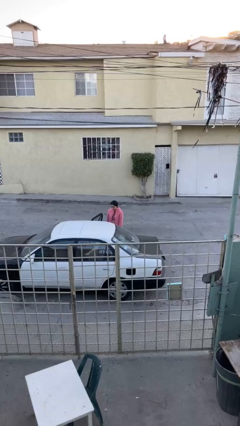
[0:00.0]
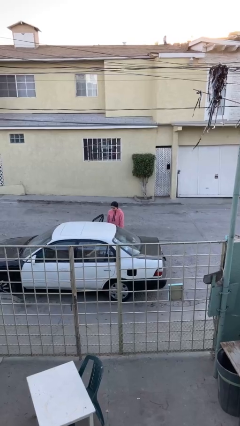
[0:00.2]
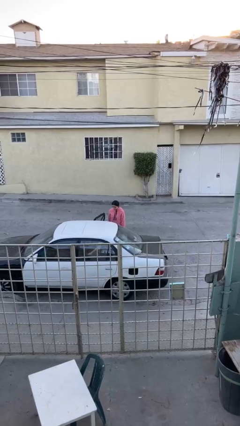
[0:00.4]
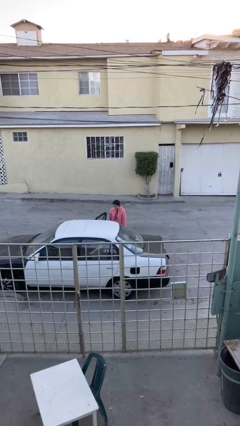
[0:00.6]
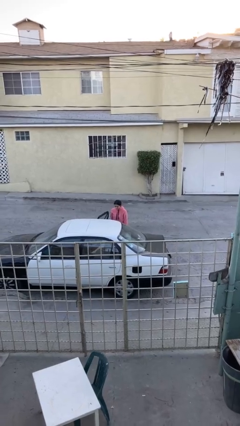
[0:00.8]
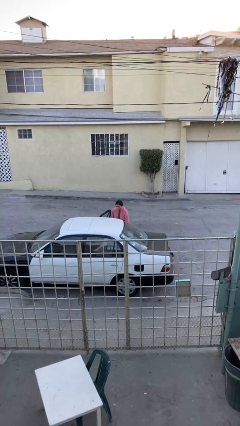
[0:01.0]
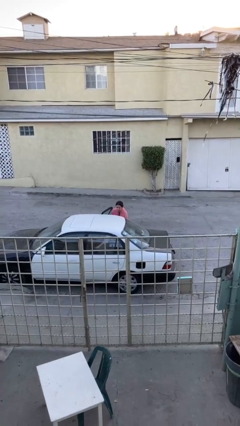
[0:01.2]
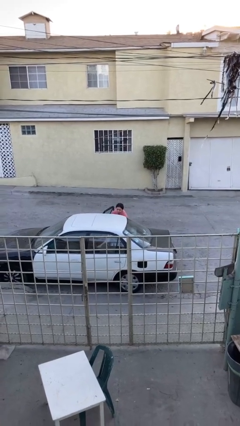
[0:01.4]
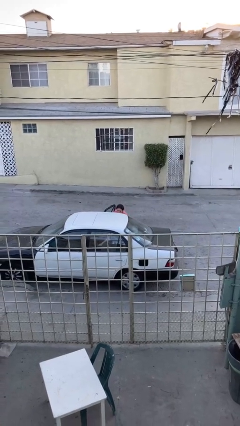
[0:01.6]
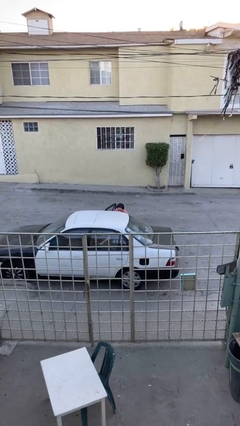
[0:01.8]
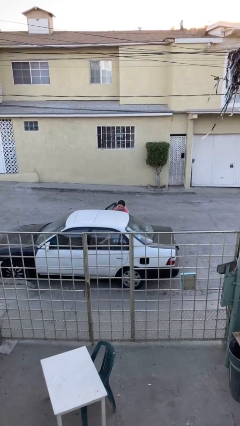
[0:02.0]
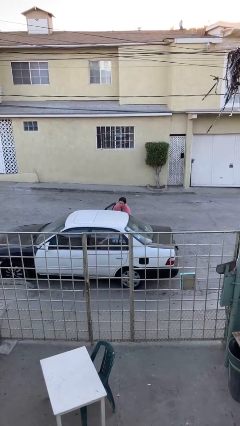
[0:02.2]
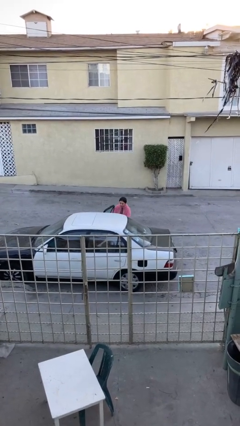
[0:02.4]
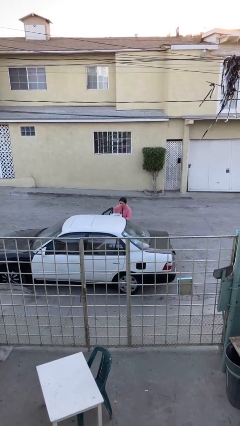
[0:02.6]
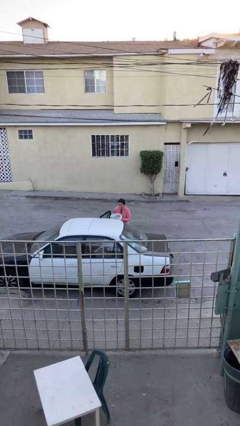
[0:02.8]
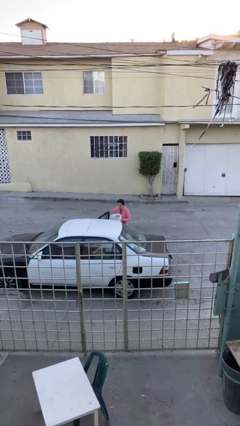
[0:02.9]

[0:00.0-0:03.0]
person unloads car

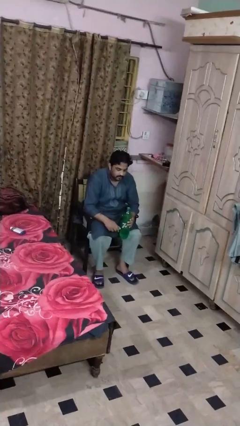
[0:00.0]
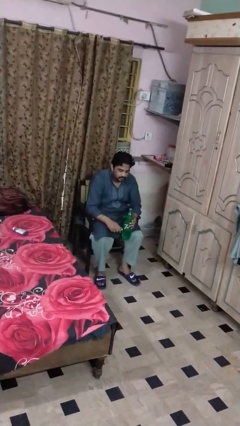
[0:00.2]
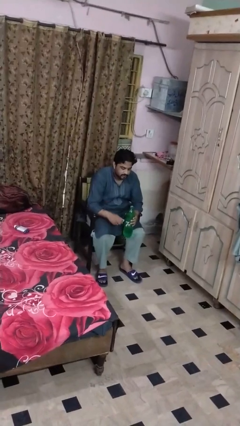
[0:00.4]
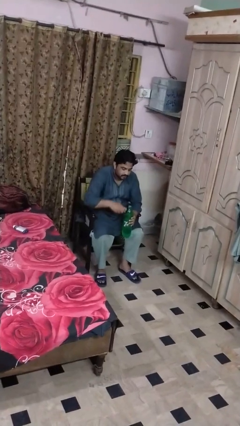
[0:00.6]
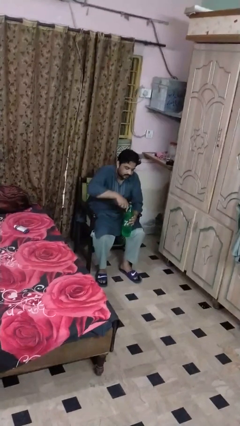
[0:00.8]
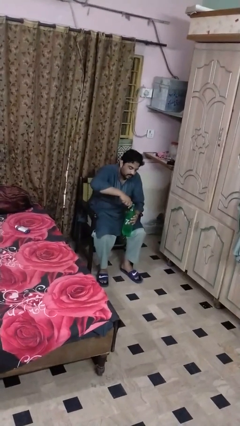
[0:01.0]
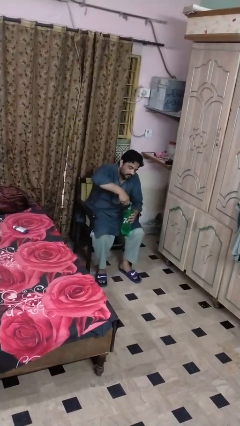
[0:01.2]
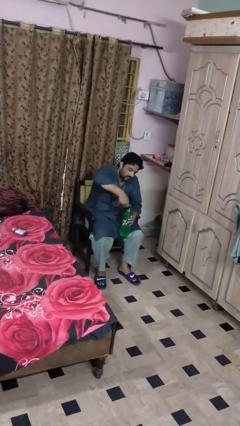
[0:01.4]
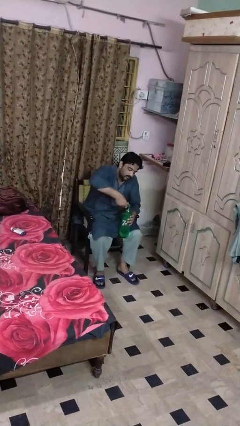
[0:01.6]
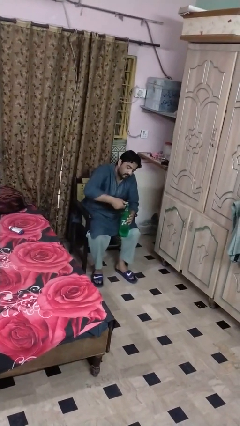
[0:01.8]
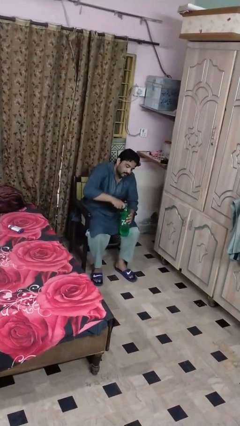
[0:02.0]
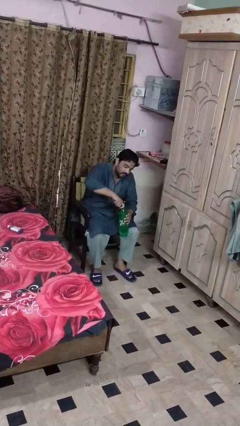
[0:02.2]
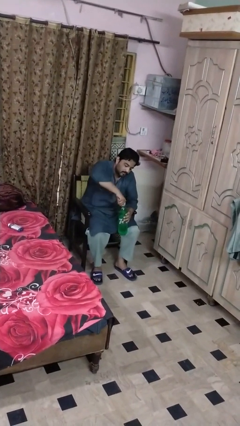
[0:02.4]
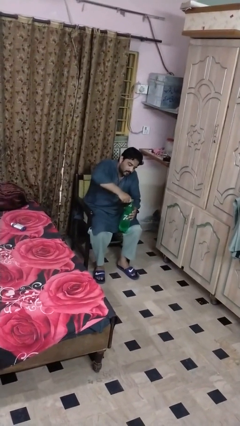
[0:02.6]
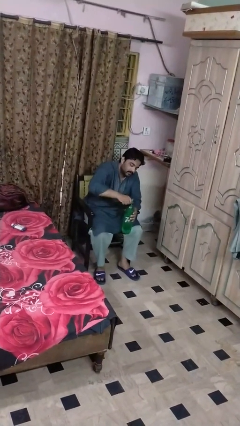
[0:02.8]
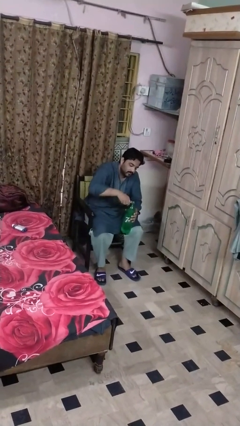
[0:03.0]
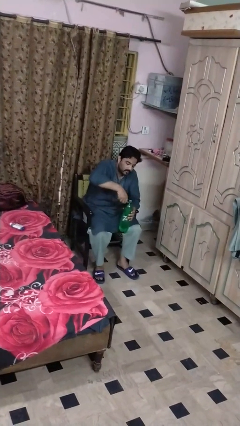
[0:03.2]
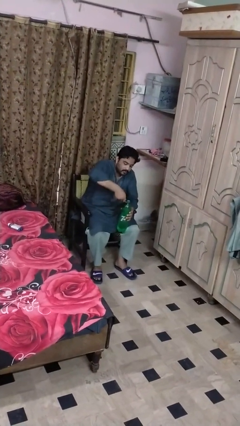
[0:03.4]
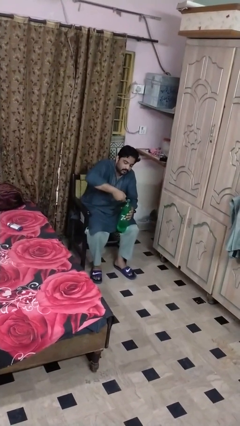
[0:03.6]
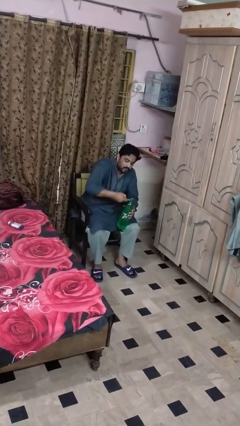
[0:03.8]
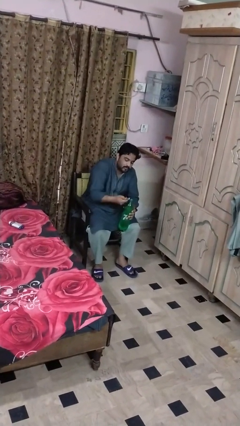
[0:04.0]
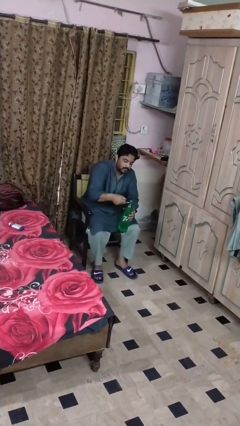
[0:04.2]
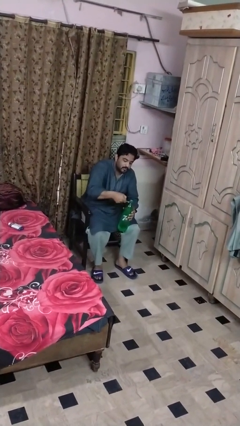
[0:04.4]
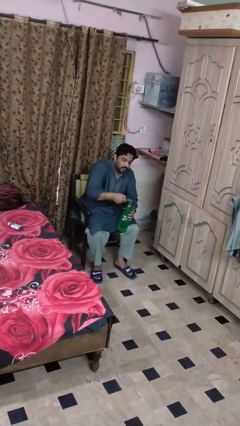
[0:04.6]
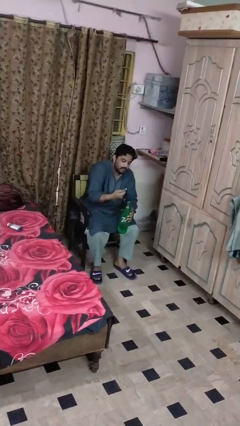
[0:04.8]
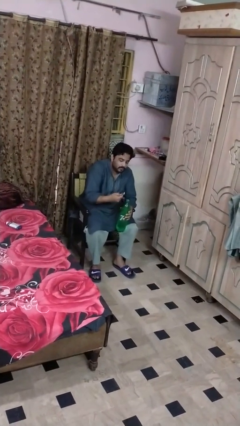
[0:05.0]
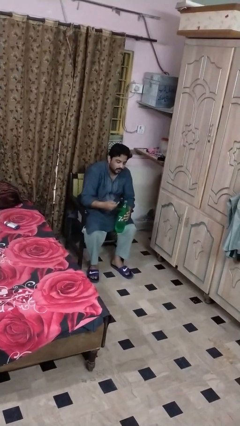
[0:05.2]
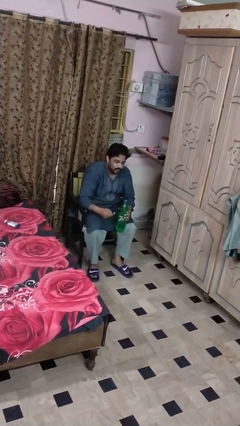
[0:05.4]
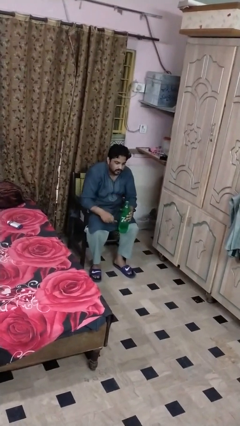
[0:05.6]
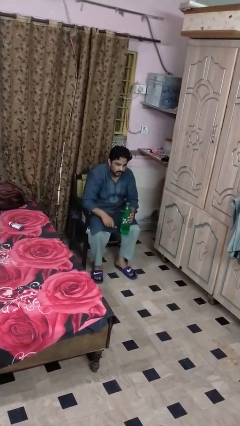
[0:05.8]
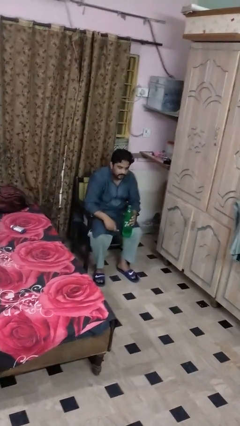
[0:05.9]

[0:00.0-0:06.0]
person opens can with can opener

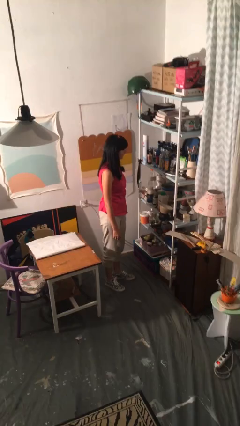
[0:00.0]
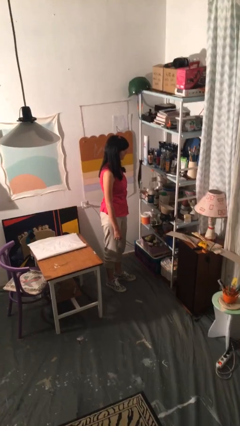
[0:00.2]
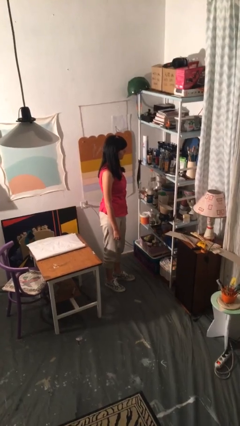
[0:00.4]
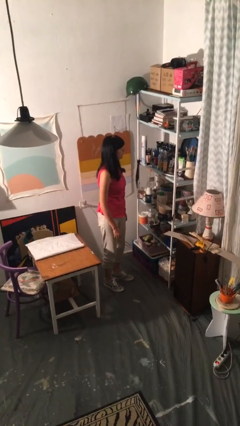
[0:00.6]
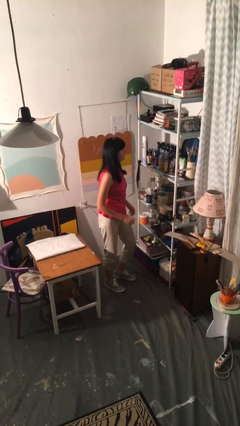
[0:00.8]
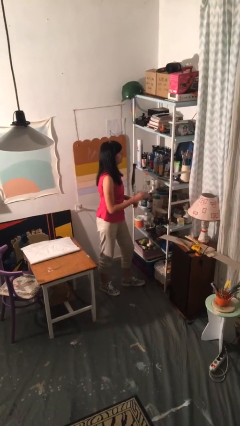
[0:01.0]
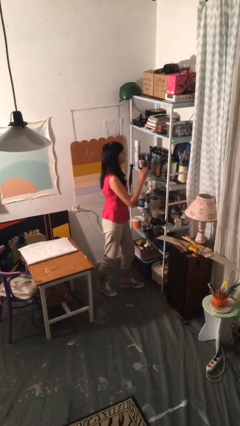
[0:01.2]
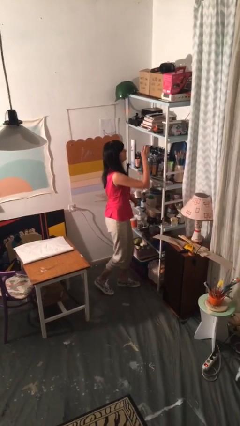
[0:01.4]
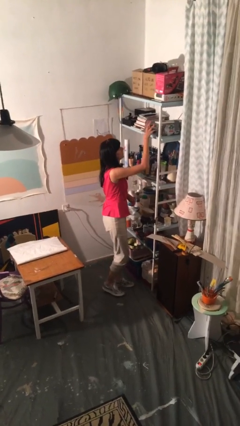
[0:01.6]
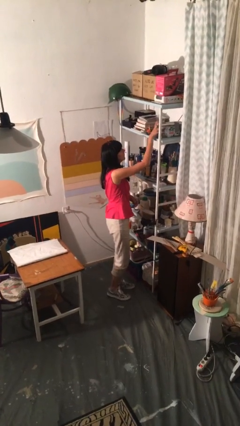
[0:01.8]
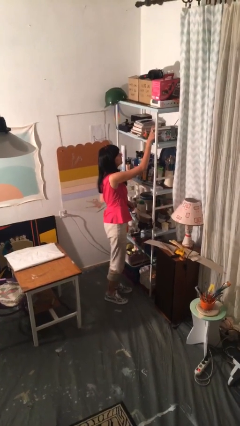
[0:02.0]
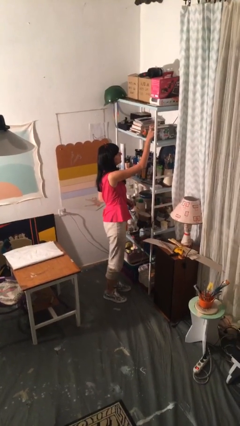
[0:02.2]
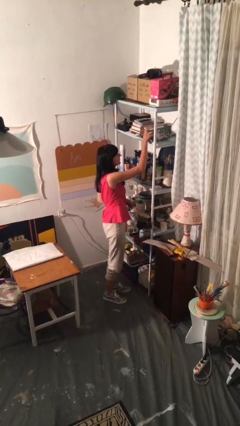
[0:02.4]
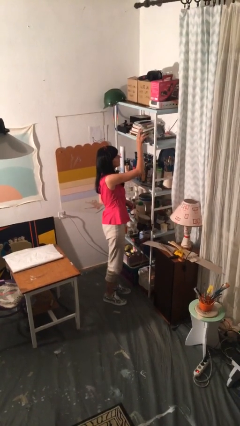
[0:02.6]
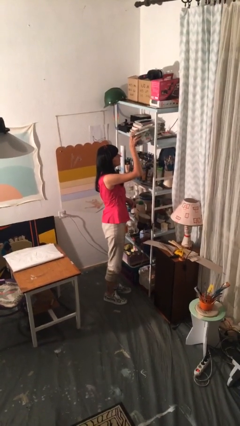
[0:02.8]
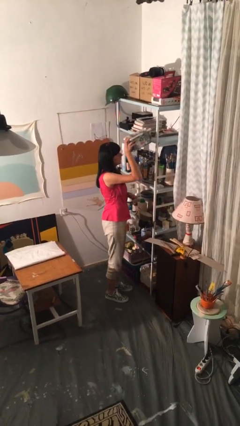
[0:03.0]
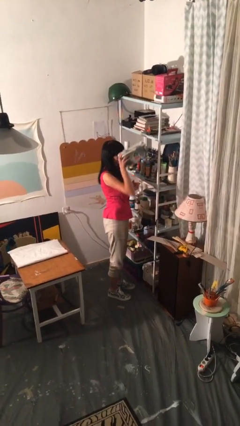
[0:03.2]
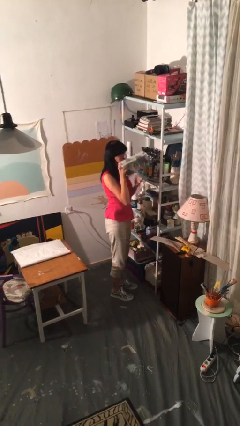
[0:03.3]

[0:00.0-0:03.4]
person picks up object from shelf

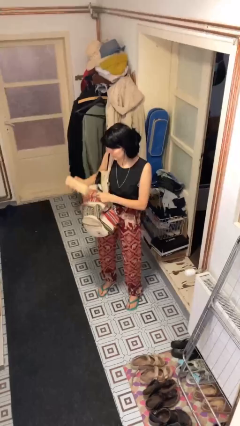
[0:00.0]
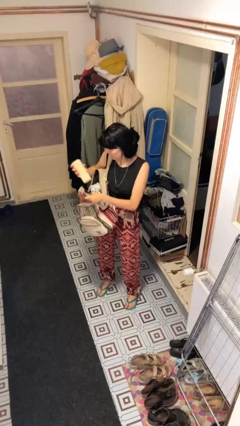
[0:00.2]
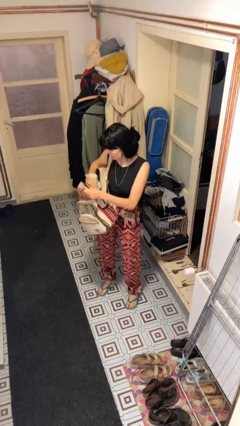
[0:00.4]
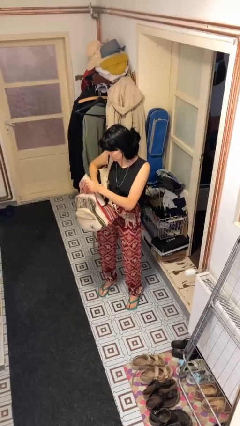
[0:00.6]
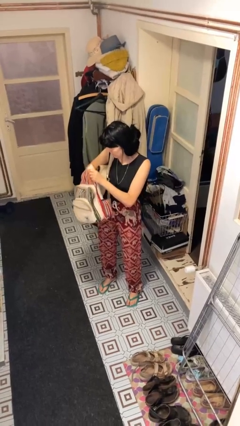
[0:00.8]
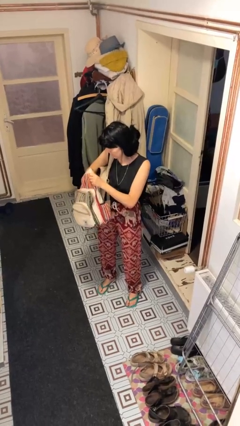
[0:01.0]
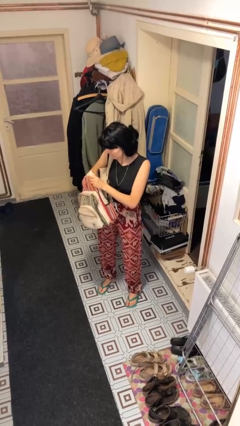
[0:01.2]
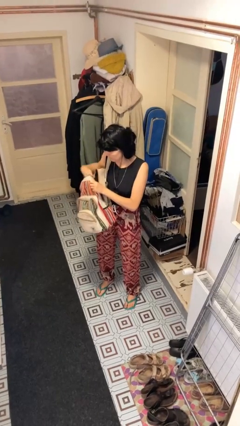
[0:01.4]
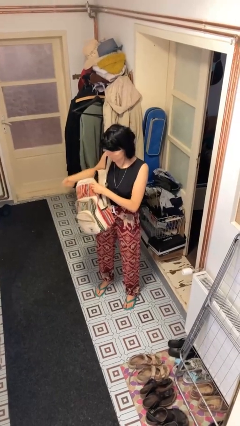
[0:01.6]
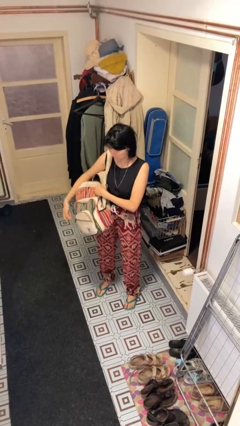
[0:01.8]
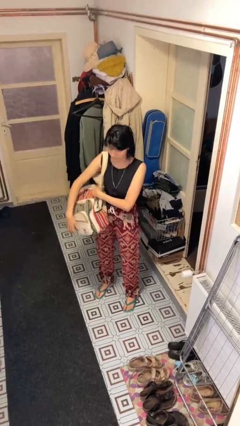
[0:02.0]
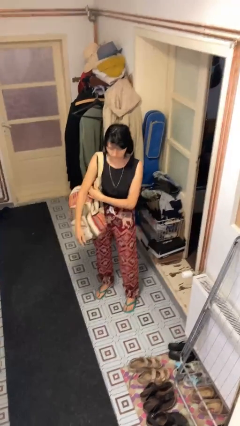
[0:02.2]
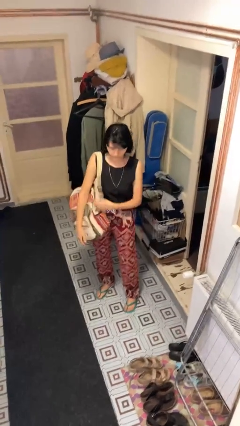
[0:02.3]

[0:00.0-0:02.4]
person puts object into backpack

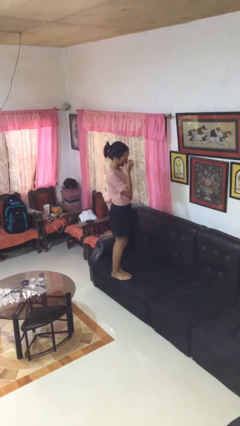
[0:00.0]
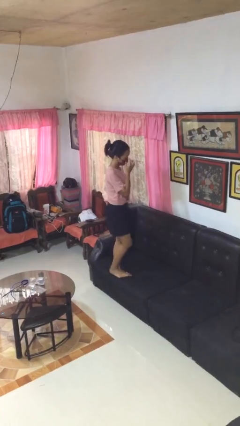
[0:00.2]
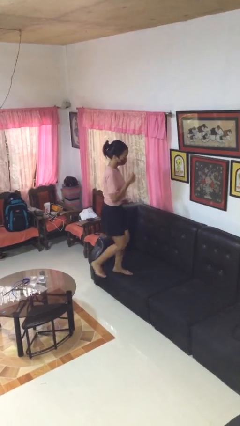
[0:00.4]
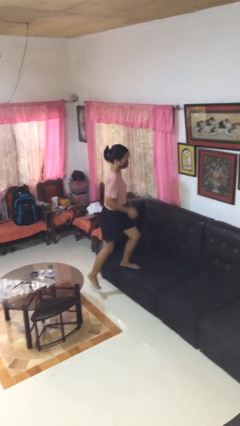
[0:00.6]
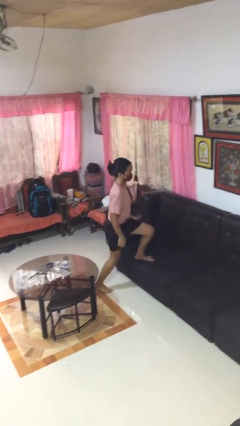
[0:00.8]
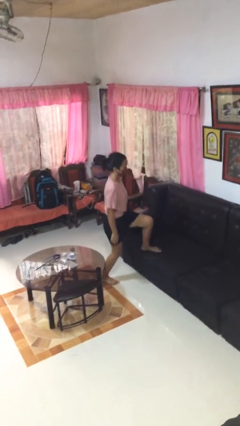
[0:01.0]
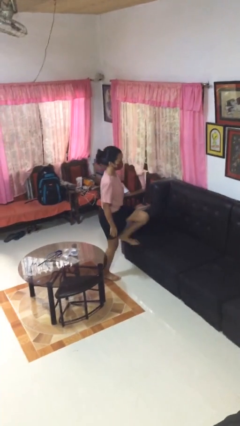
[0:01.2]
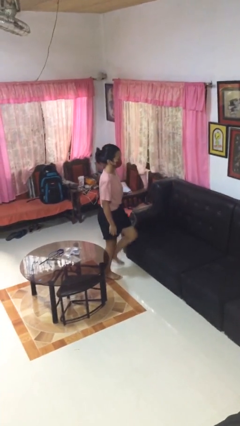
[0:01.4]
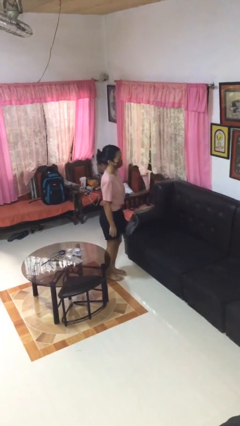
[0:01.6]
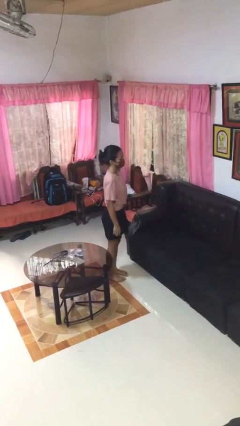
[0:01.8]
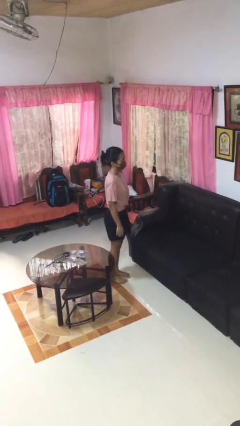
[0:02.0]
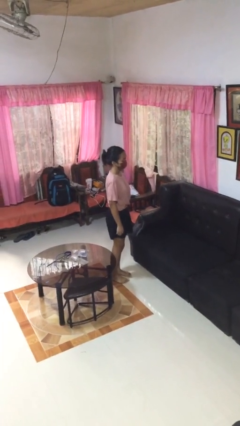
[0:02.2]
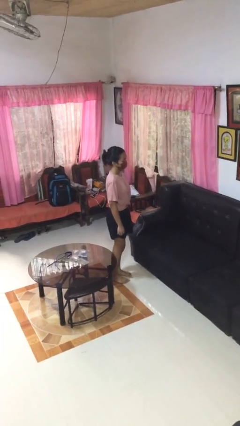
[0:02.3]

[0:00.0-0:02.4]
person climbs off couch

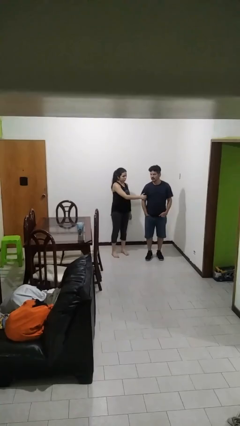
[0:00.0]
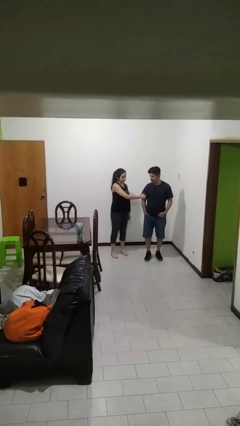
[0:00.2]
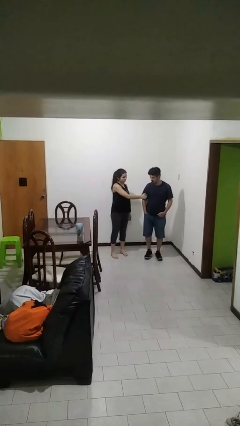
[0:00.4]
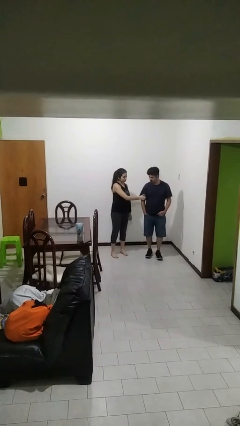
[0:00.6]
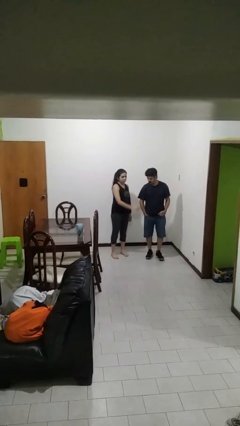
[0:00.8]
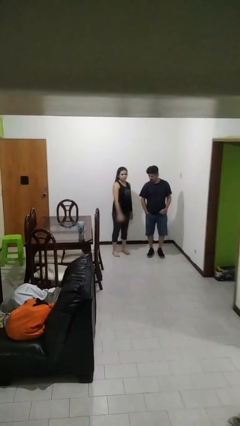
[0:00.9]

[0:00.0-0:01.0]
person grabs person by bicep
